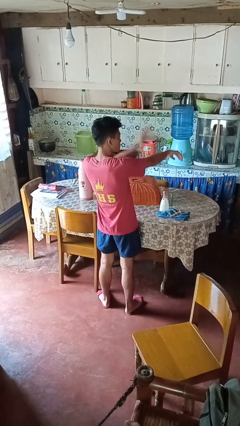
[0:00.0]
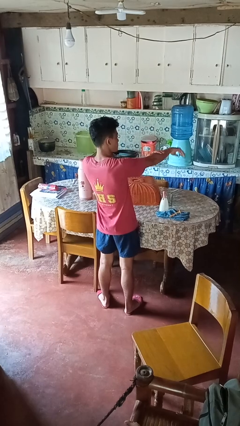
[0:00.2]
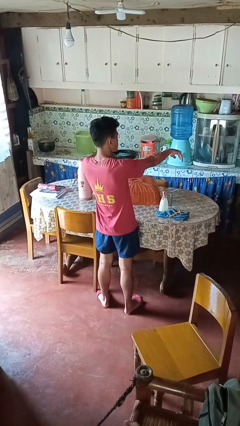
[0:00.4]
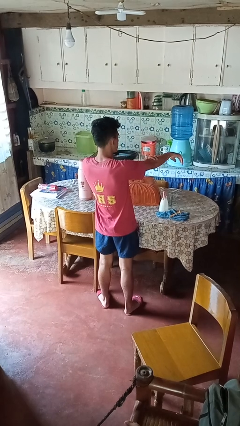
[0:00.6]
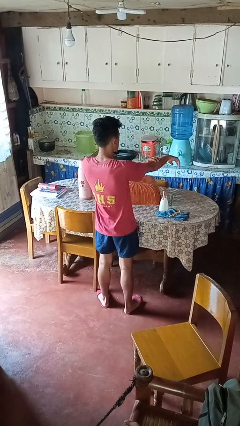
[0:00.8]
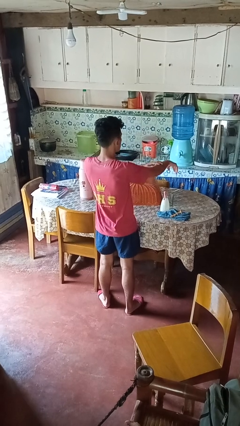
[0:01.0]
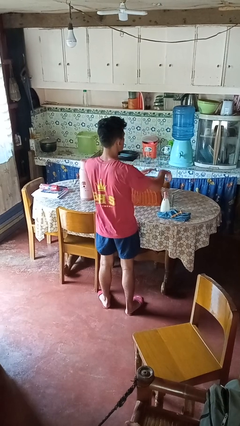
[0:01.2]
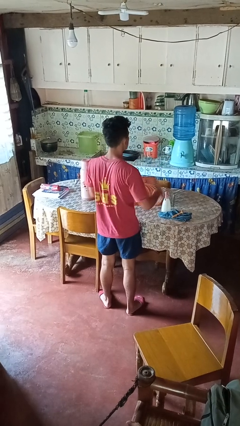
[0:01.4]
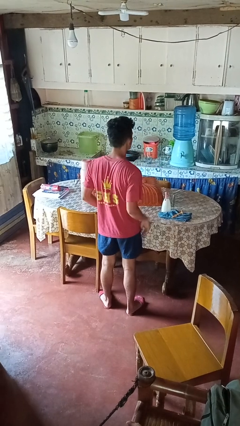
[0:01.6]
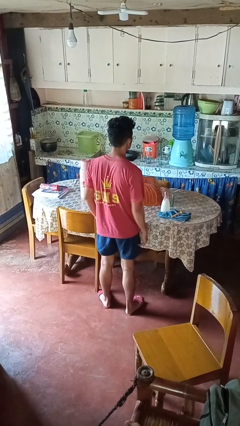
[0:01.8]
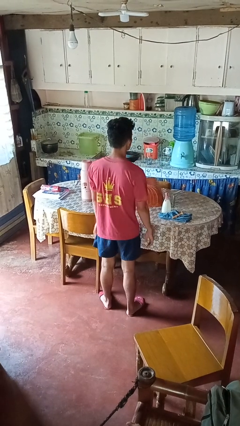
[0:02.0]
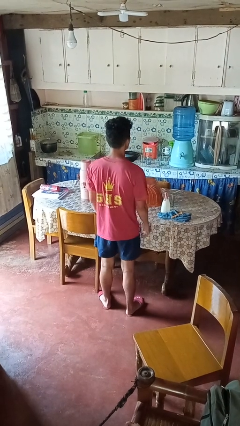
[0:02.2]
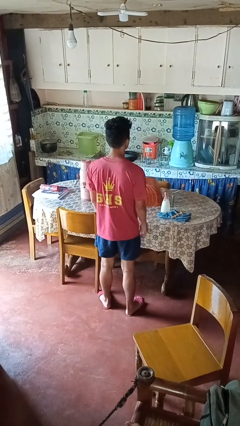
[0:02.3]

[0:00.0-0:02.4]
person swats bug

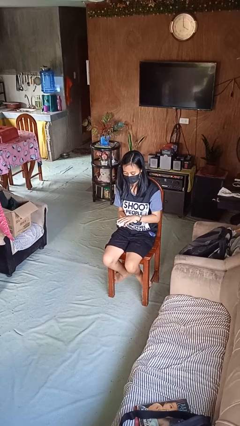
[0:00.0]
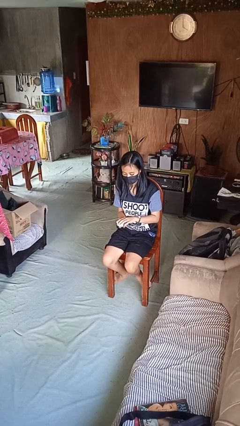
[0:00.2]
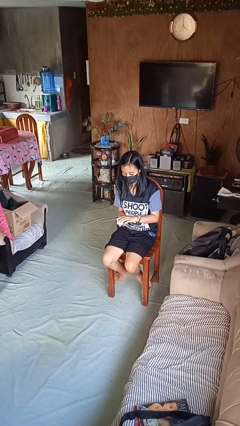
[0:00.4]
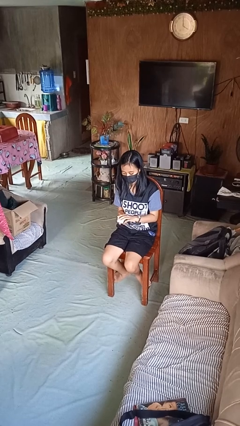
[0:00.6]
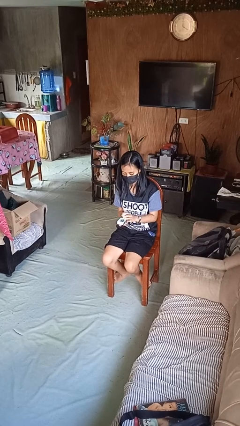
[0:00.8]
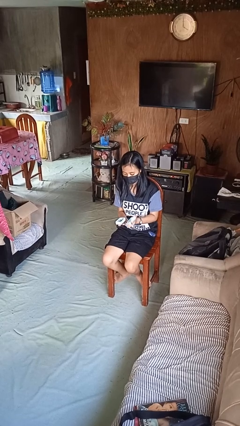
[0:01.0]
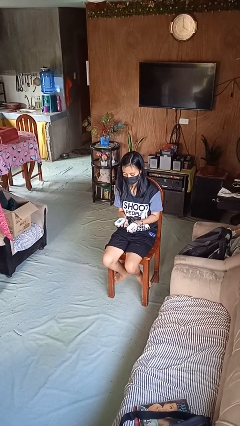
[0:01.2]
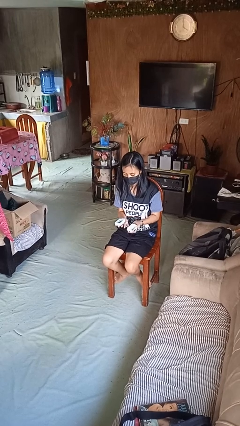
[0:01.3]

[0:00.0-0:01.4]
person opens jewelry box

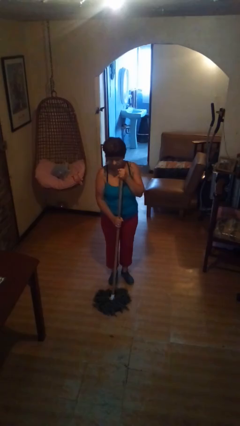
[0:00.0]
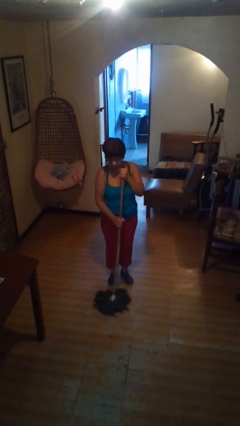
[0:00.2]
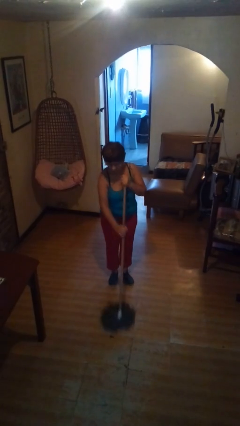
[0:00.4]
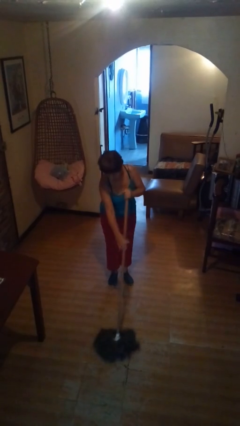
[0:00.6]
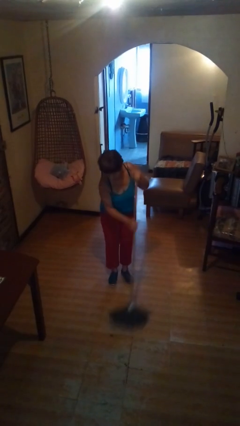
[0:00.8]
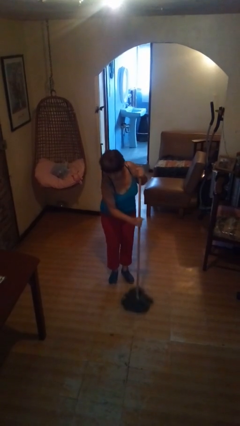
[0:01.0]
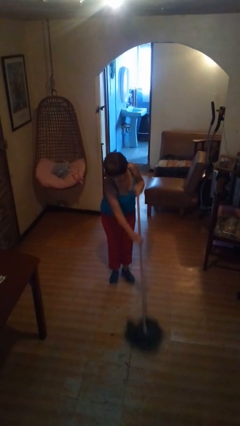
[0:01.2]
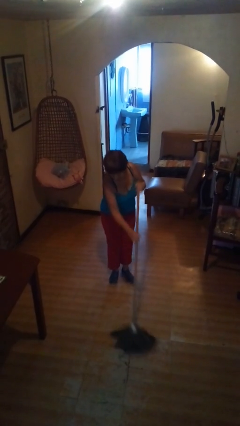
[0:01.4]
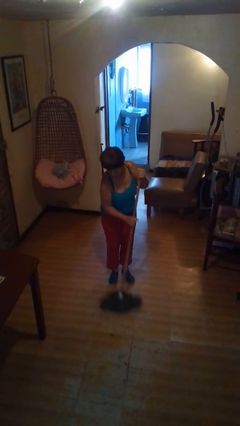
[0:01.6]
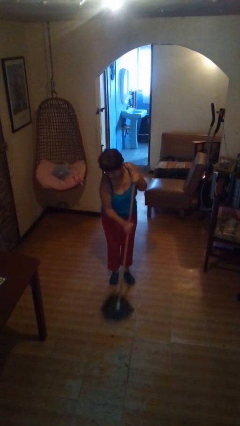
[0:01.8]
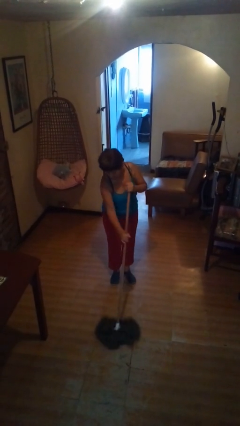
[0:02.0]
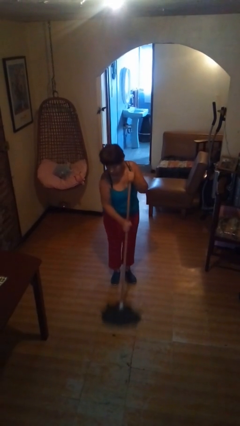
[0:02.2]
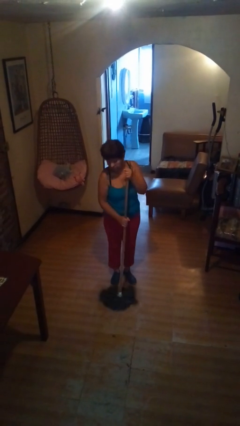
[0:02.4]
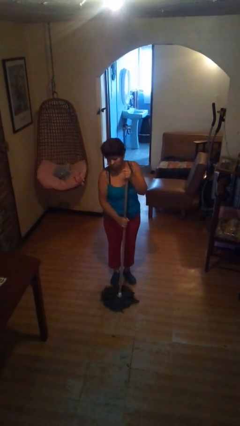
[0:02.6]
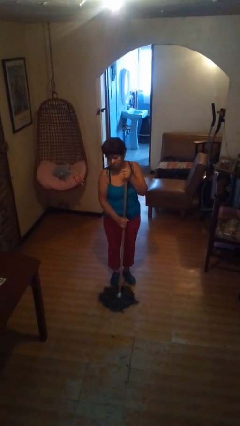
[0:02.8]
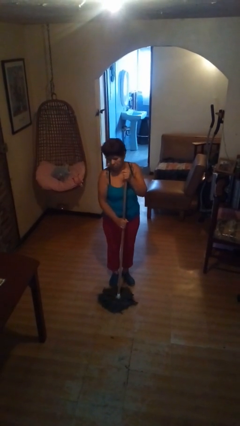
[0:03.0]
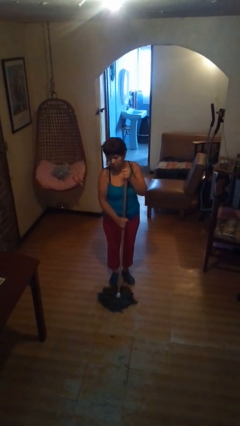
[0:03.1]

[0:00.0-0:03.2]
person mops

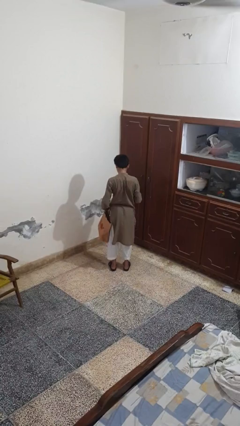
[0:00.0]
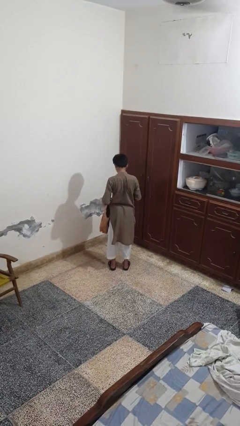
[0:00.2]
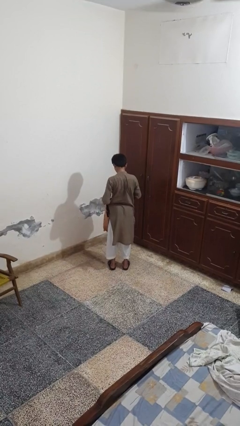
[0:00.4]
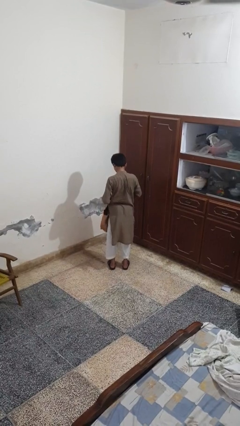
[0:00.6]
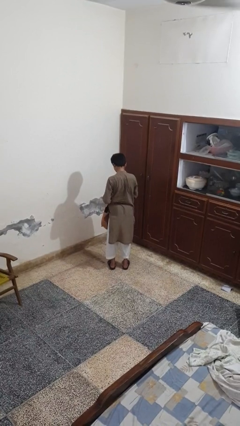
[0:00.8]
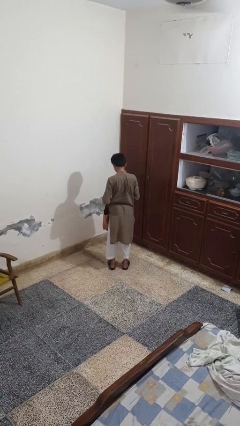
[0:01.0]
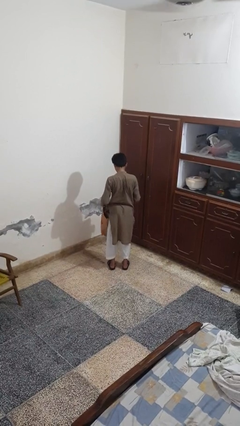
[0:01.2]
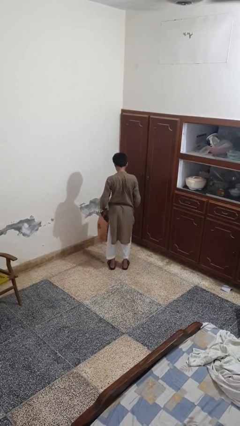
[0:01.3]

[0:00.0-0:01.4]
person puts object into bag

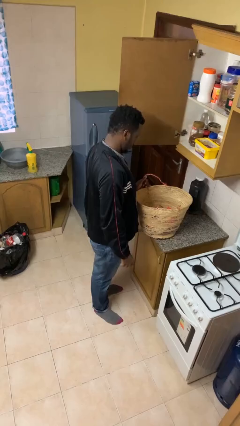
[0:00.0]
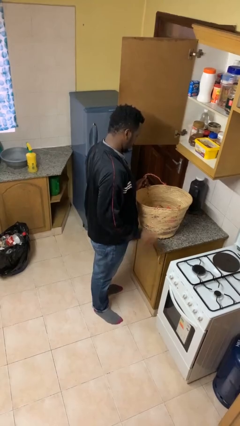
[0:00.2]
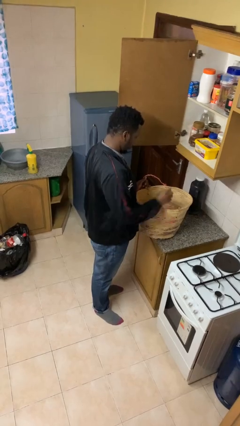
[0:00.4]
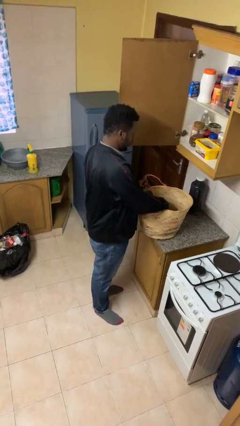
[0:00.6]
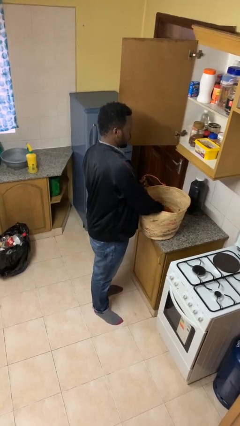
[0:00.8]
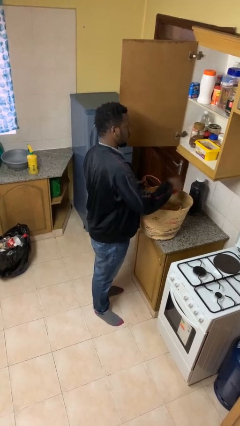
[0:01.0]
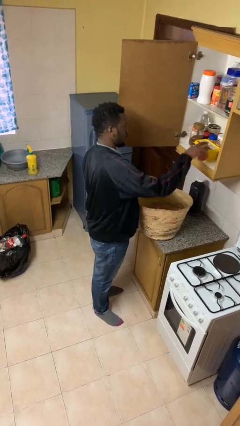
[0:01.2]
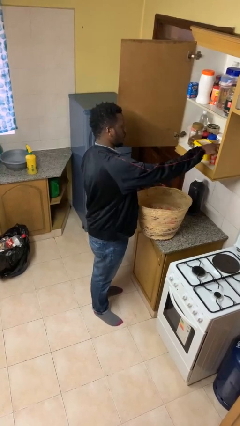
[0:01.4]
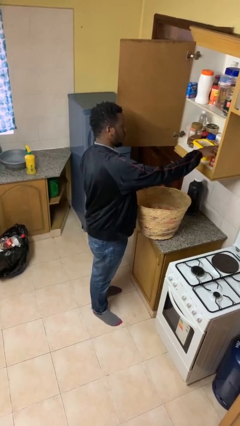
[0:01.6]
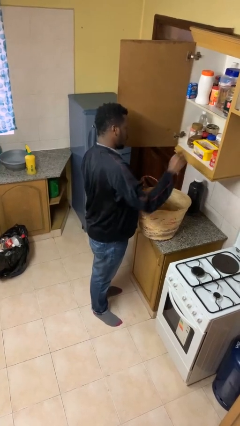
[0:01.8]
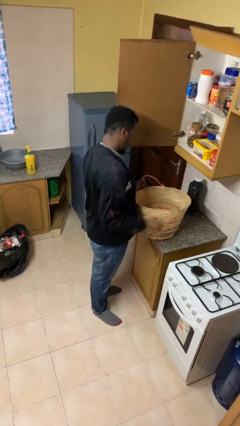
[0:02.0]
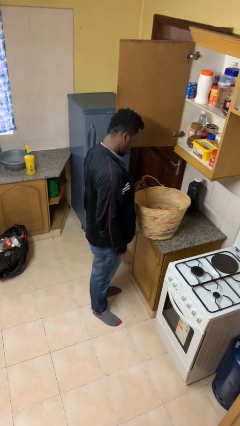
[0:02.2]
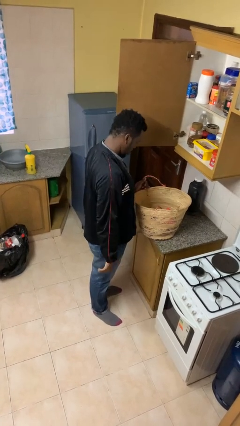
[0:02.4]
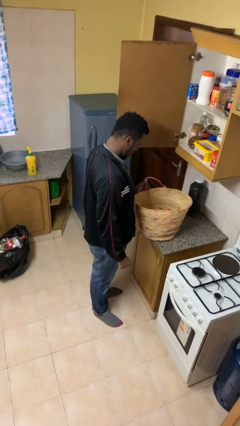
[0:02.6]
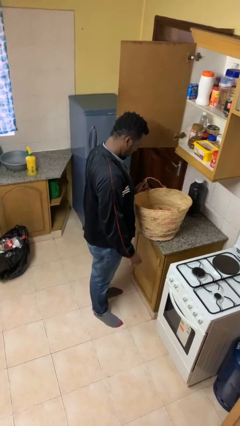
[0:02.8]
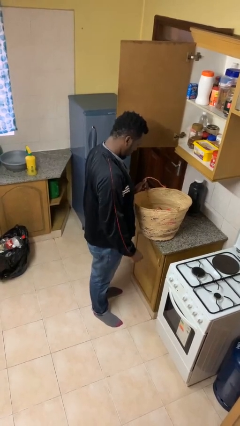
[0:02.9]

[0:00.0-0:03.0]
person loads groceries into cabinet

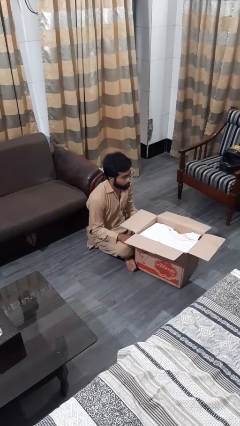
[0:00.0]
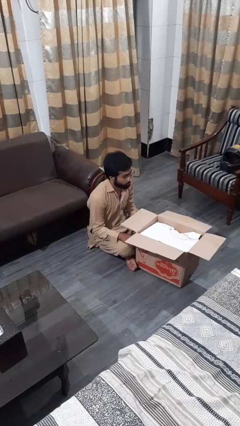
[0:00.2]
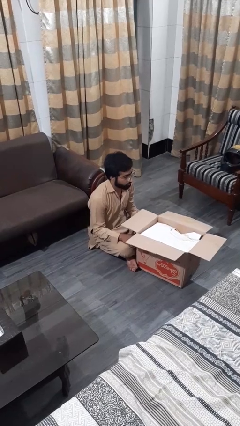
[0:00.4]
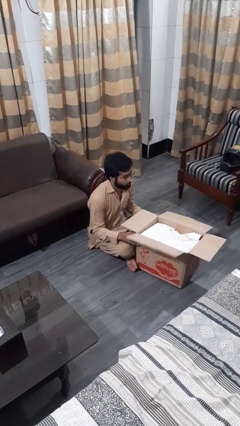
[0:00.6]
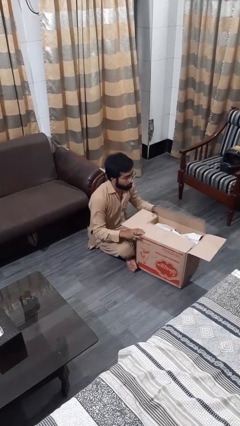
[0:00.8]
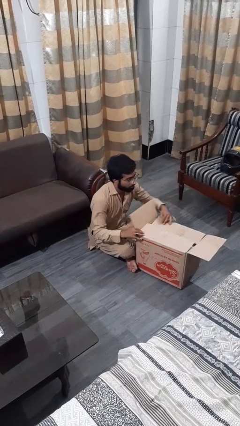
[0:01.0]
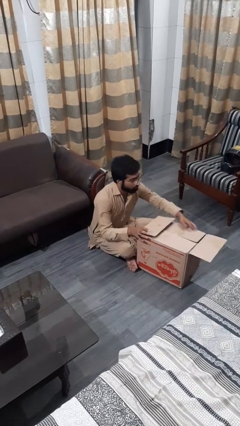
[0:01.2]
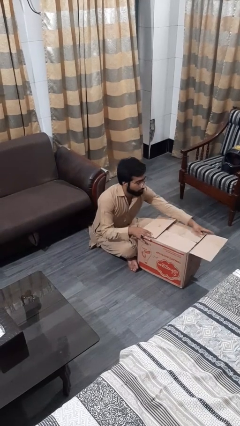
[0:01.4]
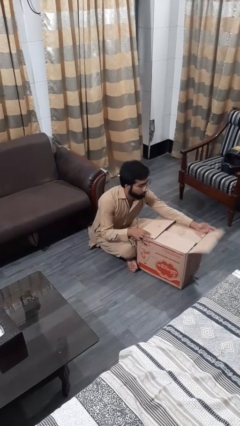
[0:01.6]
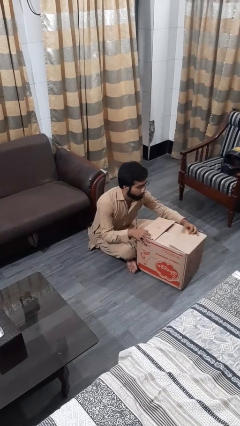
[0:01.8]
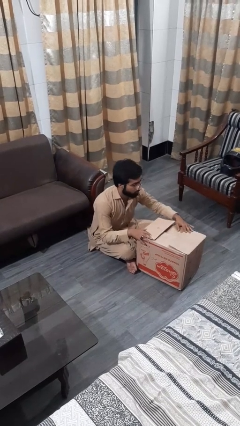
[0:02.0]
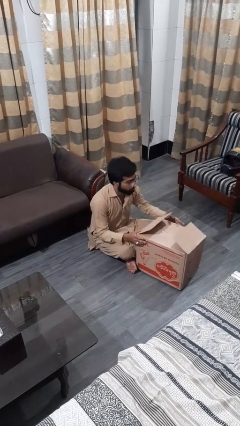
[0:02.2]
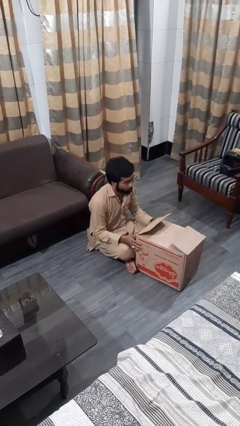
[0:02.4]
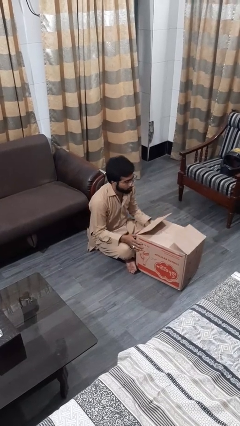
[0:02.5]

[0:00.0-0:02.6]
person closes box

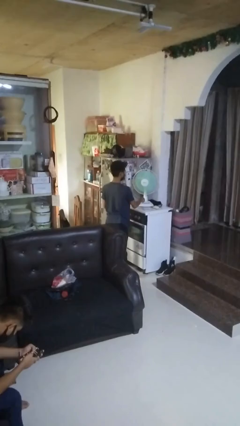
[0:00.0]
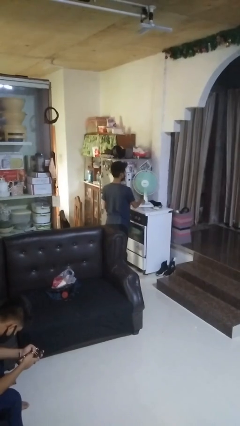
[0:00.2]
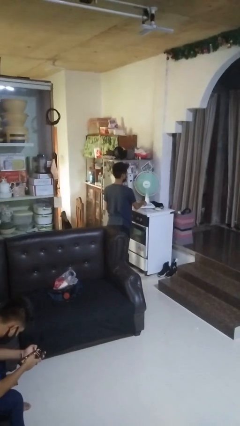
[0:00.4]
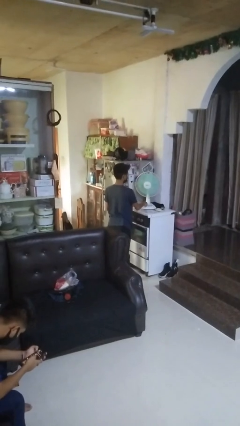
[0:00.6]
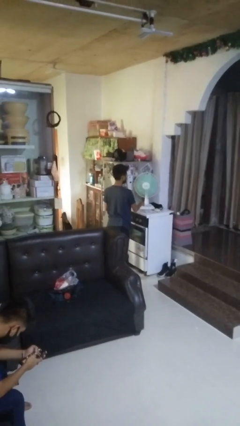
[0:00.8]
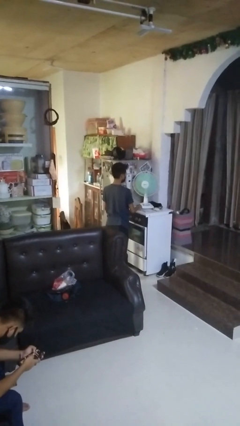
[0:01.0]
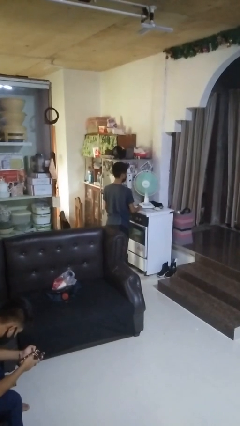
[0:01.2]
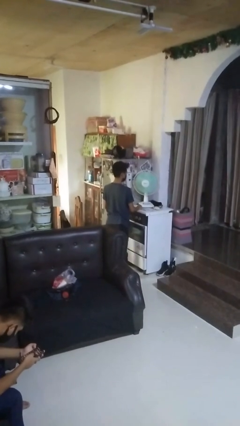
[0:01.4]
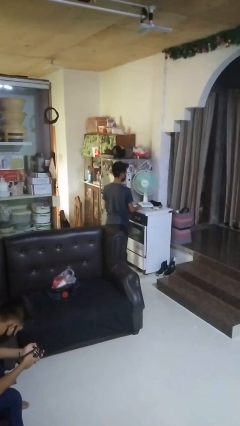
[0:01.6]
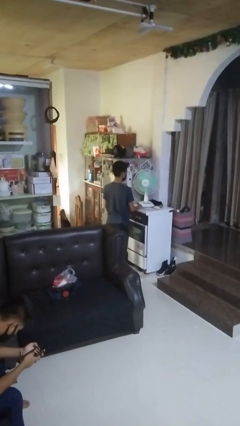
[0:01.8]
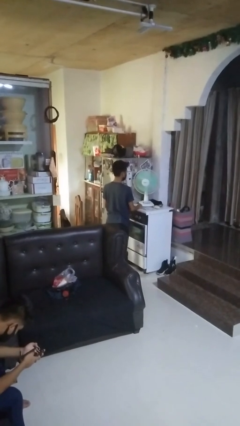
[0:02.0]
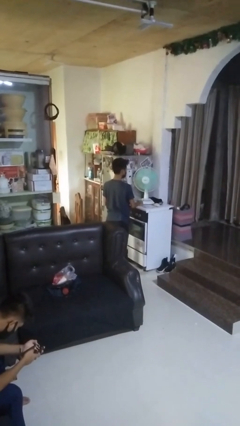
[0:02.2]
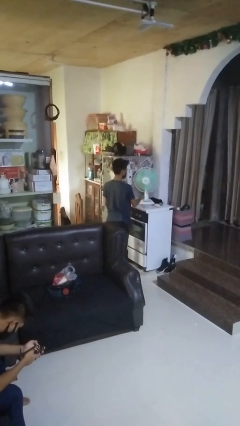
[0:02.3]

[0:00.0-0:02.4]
person turns on fan

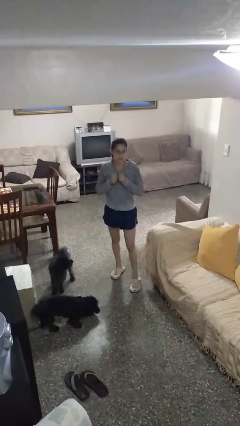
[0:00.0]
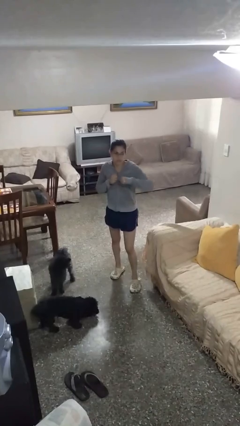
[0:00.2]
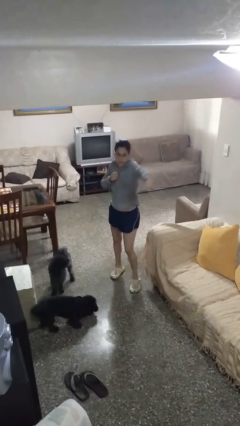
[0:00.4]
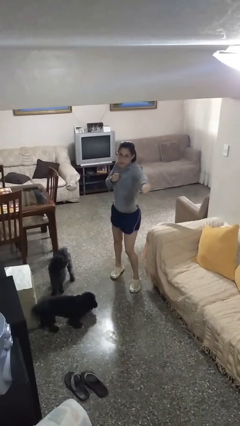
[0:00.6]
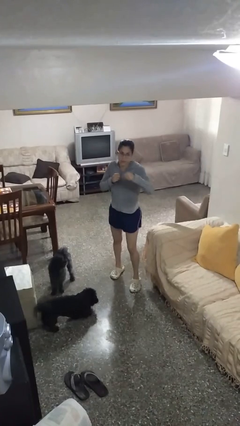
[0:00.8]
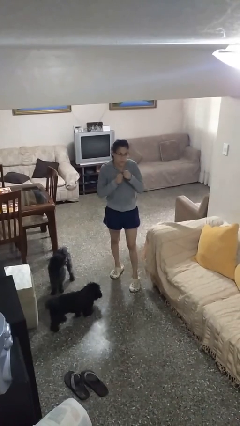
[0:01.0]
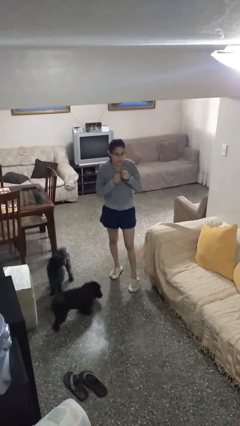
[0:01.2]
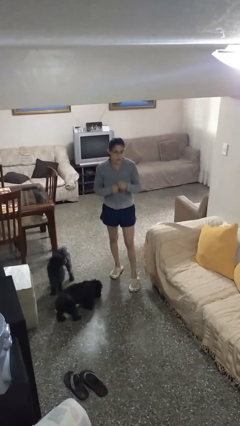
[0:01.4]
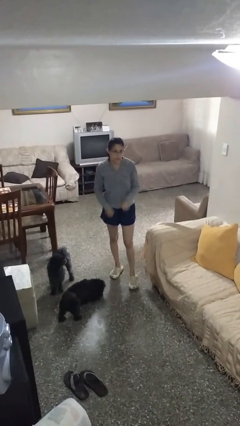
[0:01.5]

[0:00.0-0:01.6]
person karate chop